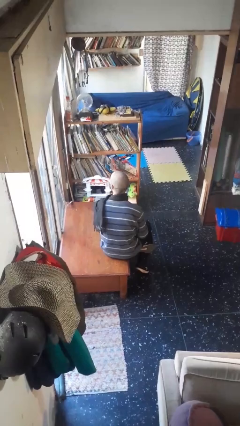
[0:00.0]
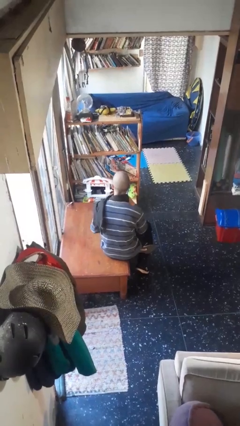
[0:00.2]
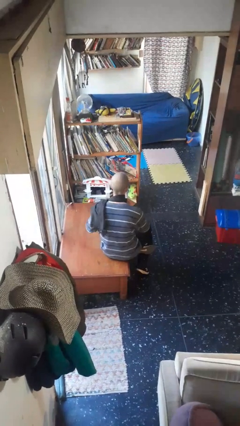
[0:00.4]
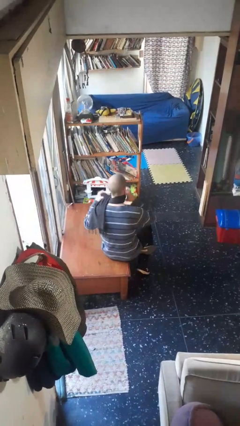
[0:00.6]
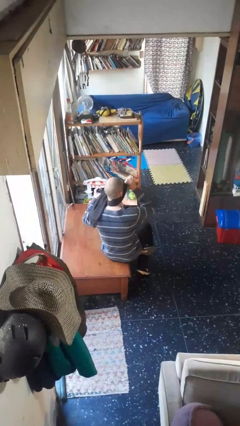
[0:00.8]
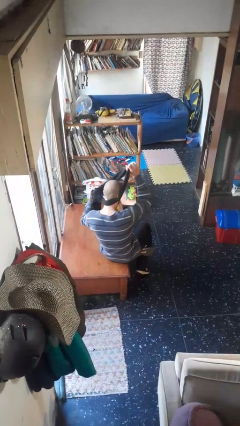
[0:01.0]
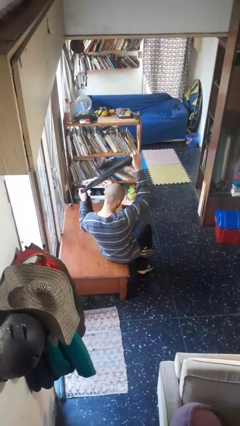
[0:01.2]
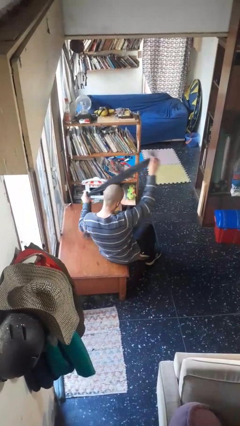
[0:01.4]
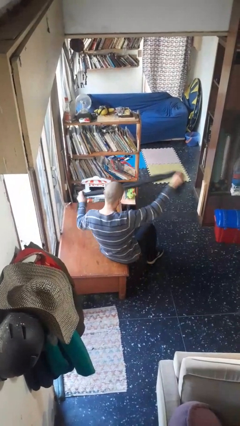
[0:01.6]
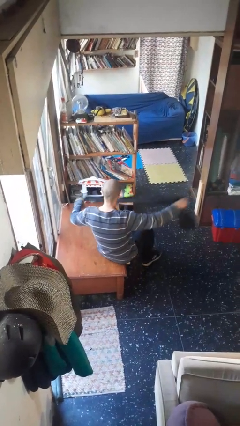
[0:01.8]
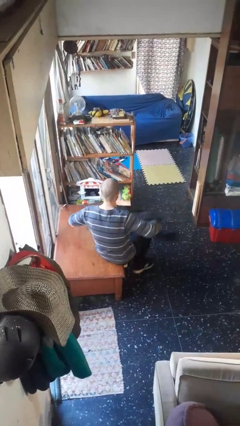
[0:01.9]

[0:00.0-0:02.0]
person takes off scarf

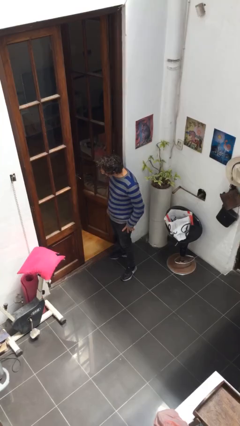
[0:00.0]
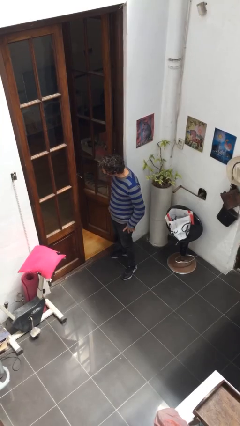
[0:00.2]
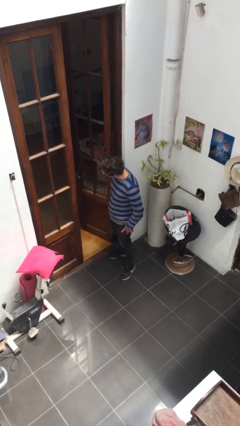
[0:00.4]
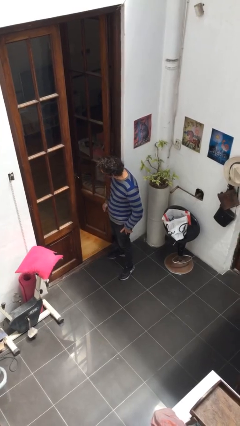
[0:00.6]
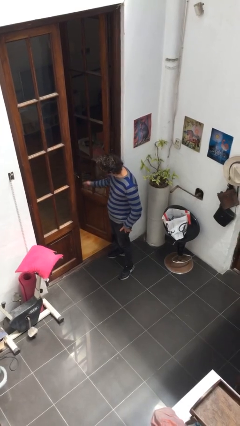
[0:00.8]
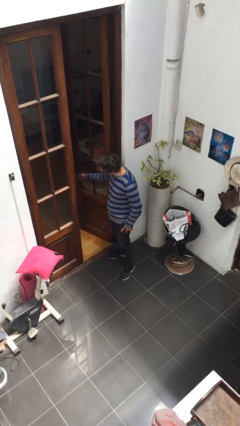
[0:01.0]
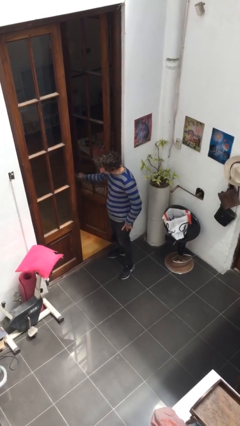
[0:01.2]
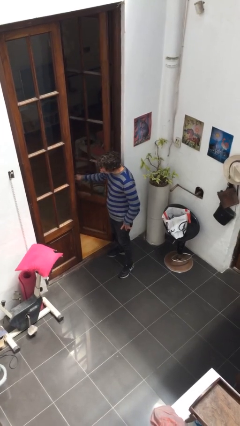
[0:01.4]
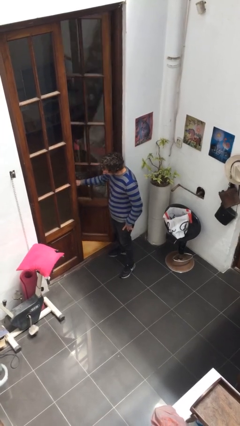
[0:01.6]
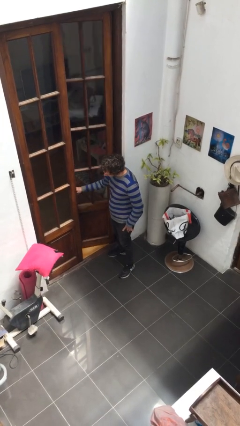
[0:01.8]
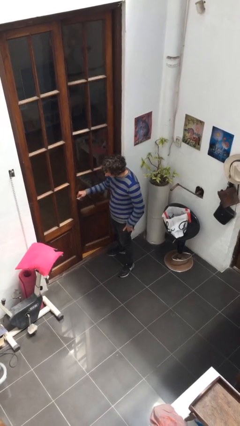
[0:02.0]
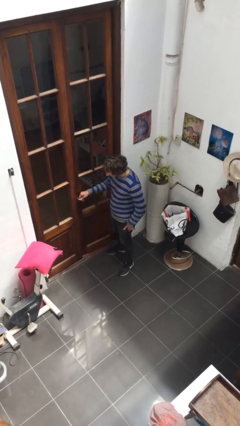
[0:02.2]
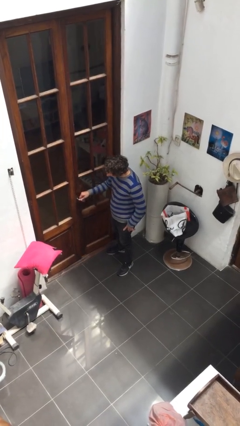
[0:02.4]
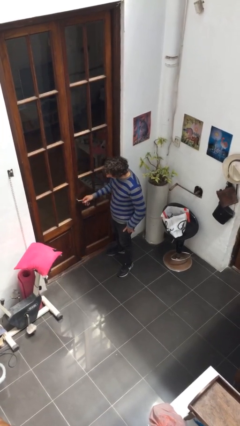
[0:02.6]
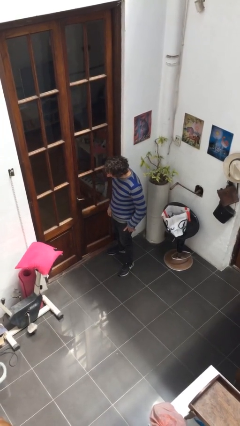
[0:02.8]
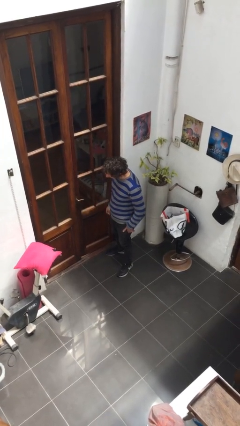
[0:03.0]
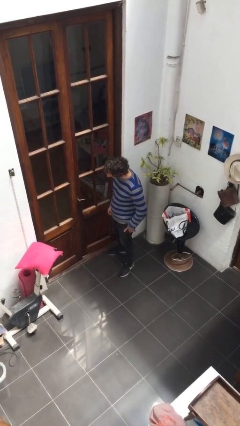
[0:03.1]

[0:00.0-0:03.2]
person closes facility door

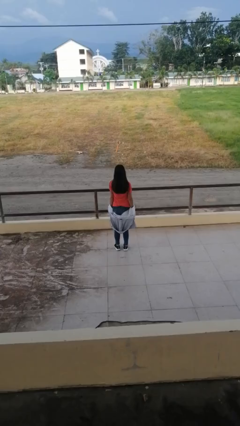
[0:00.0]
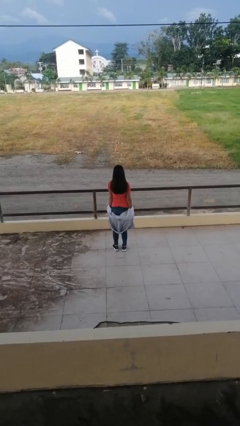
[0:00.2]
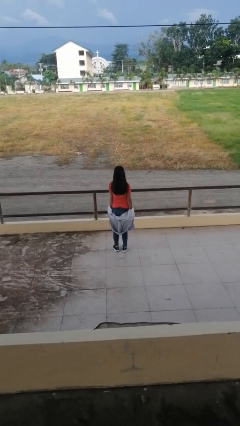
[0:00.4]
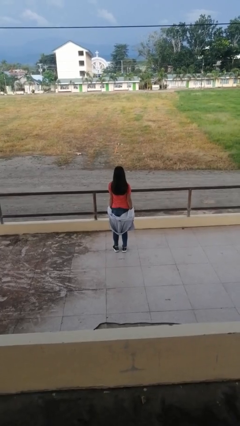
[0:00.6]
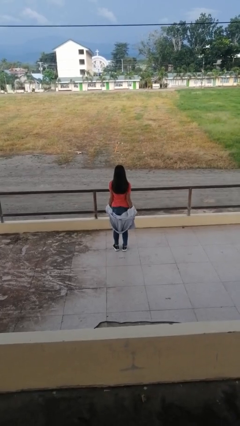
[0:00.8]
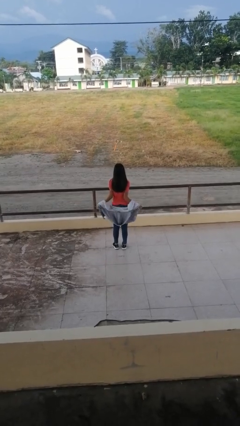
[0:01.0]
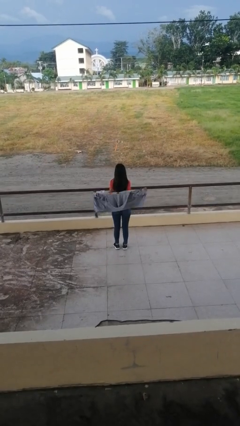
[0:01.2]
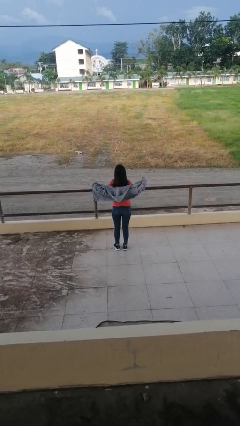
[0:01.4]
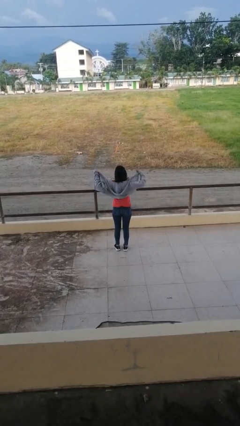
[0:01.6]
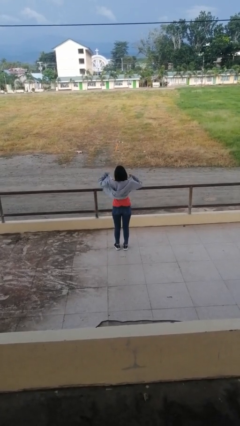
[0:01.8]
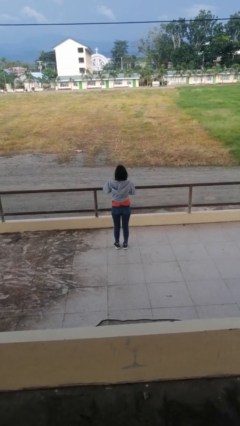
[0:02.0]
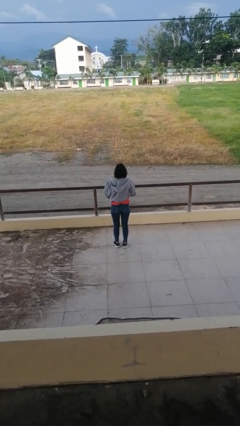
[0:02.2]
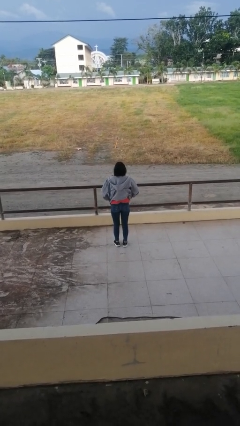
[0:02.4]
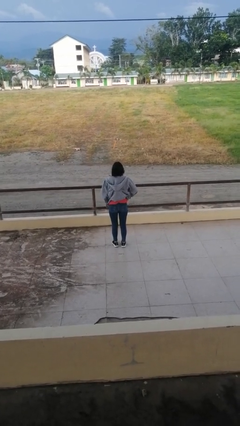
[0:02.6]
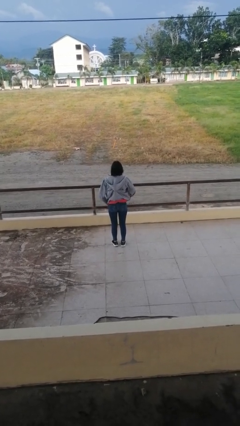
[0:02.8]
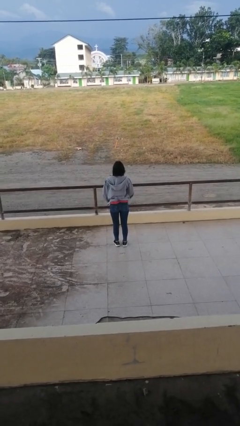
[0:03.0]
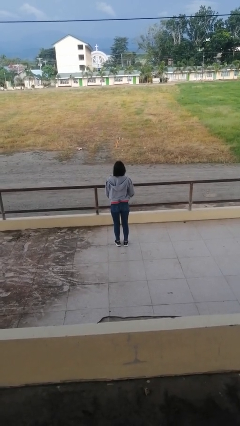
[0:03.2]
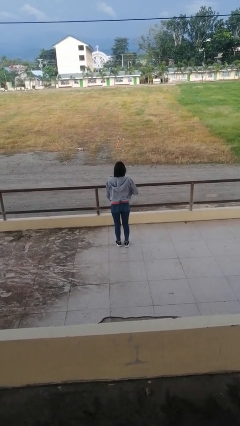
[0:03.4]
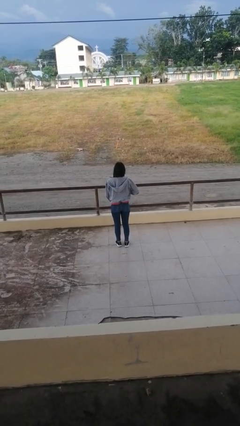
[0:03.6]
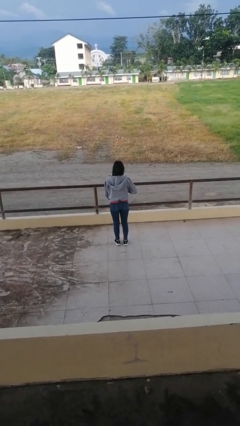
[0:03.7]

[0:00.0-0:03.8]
person puts on jacket

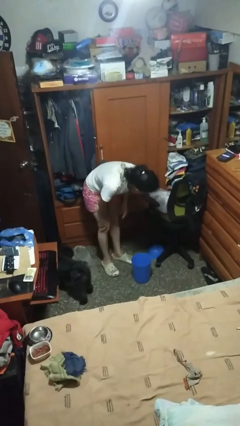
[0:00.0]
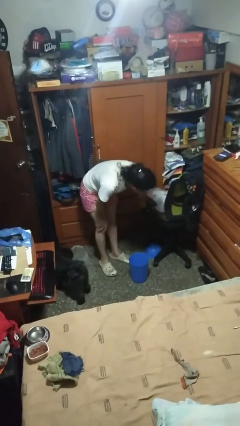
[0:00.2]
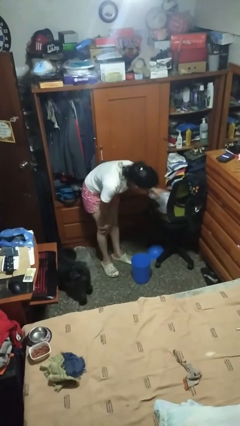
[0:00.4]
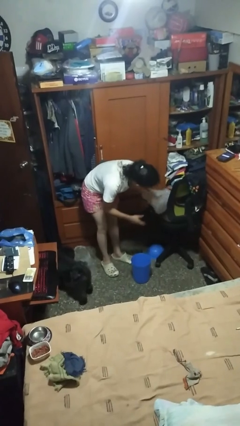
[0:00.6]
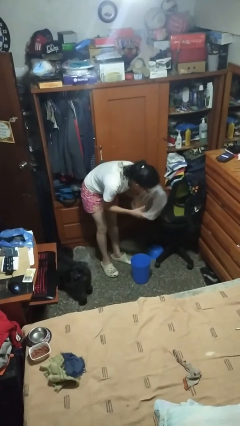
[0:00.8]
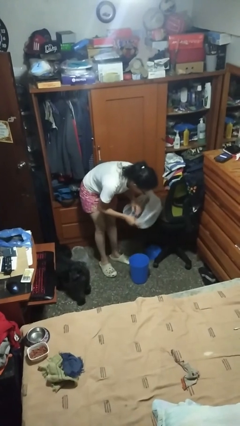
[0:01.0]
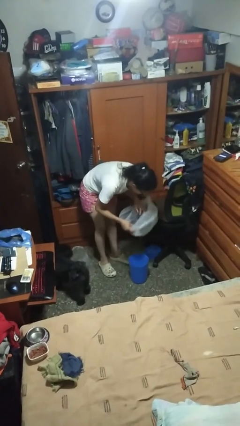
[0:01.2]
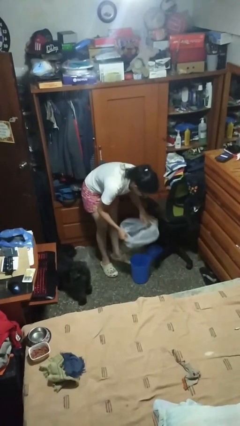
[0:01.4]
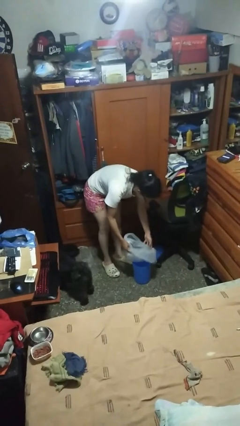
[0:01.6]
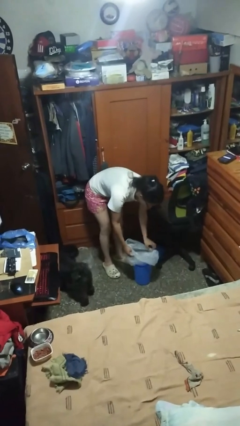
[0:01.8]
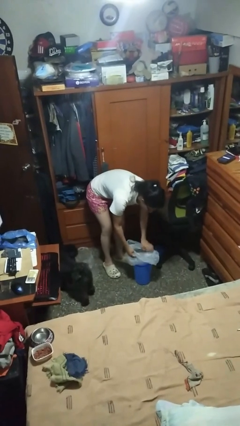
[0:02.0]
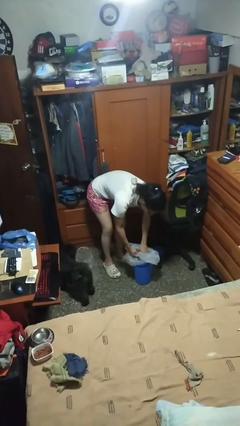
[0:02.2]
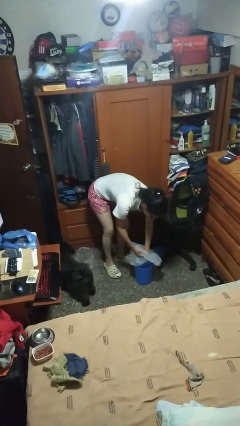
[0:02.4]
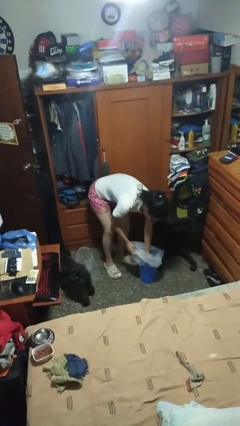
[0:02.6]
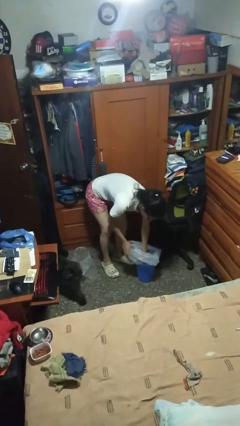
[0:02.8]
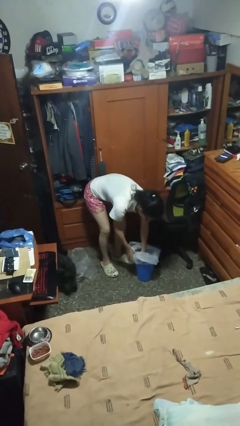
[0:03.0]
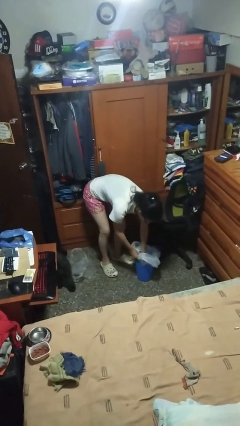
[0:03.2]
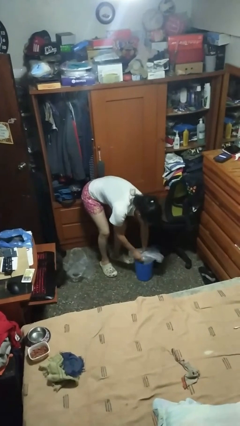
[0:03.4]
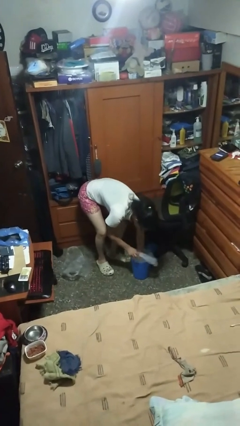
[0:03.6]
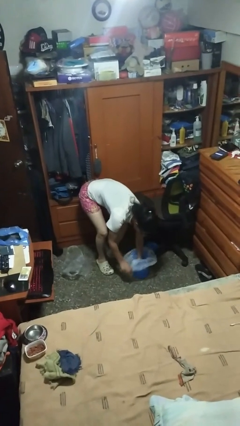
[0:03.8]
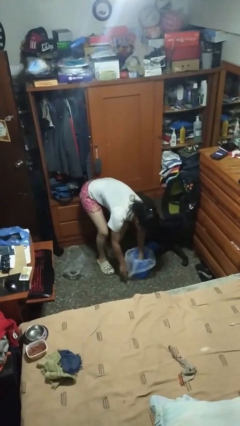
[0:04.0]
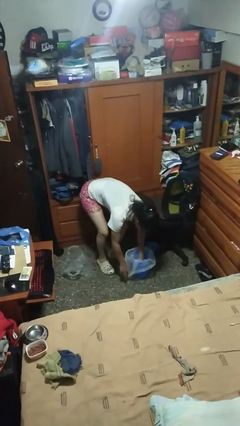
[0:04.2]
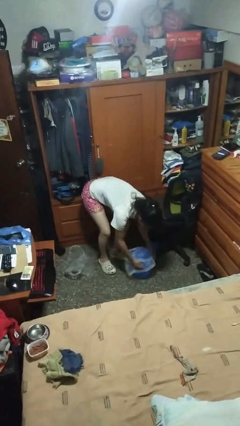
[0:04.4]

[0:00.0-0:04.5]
person inserts trashbag into trashcan

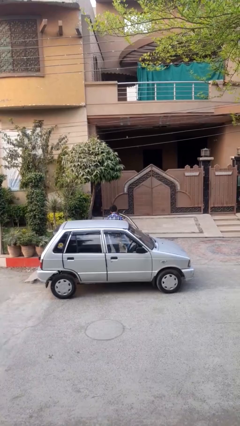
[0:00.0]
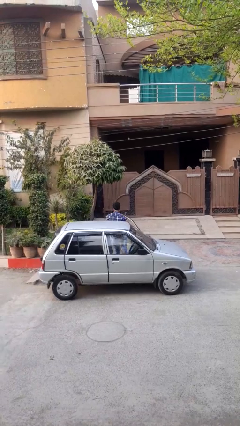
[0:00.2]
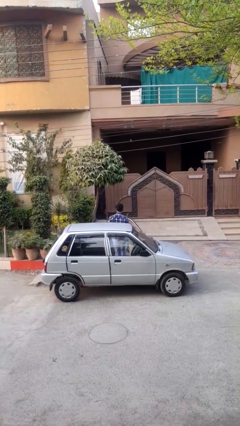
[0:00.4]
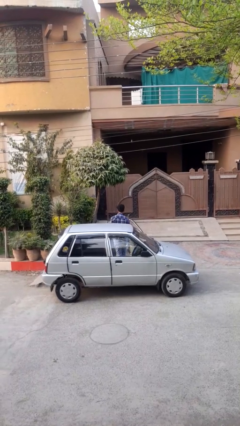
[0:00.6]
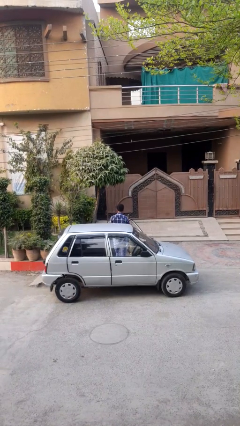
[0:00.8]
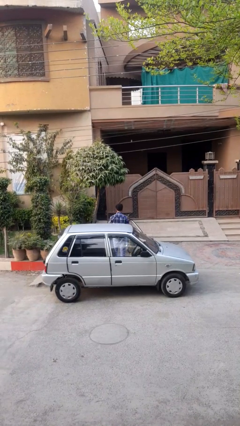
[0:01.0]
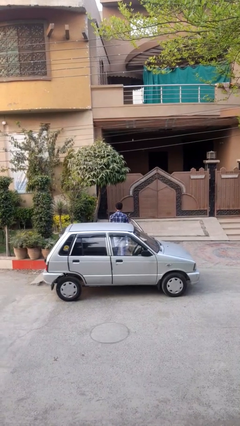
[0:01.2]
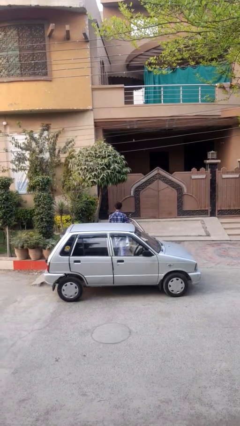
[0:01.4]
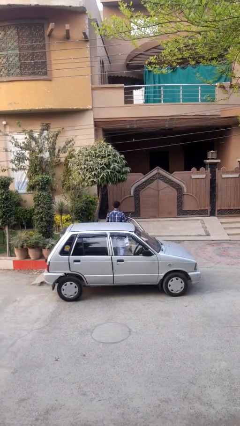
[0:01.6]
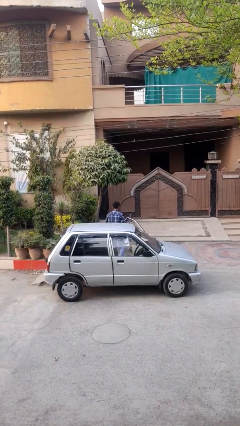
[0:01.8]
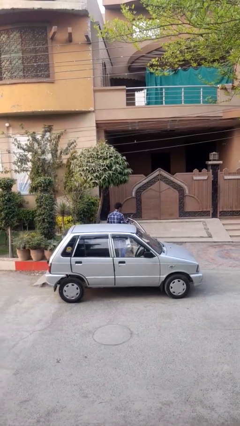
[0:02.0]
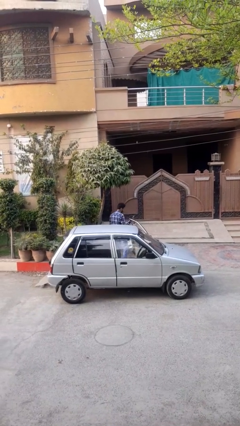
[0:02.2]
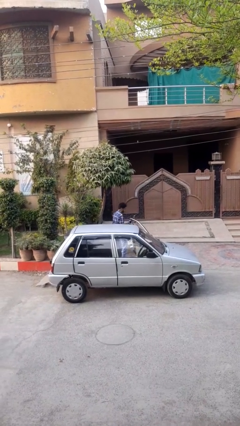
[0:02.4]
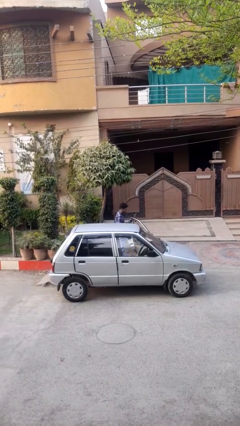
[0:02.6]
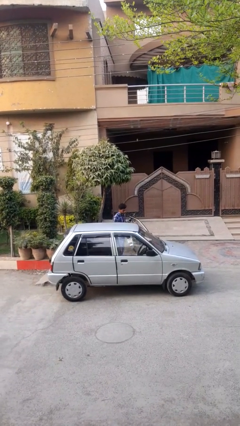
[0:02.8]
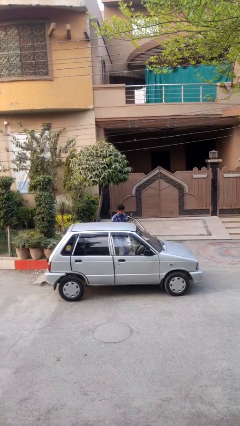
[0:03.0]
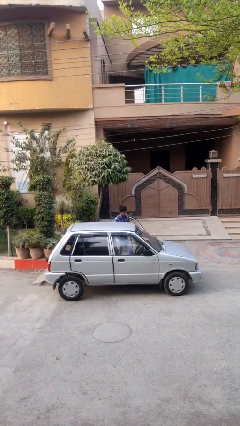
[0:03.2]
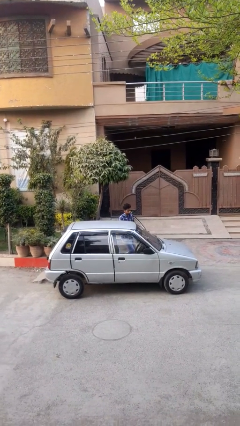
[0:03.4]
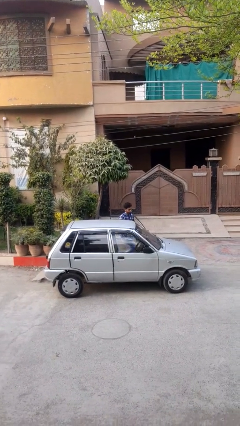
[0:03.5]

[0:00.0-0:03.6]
person exits car

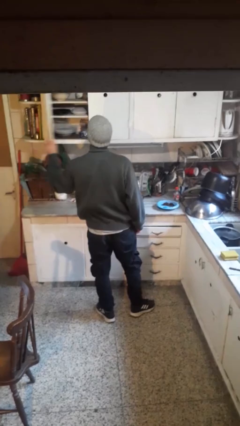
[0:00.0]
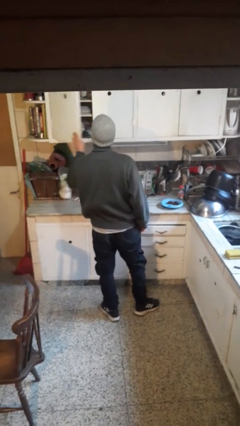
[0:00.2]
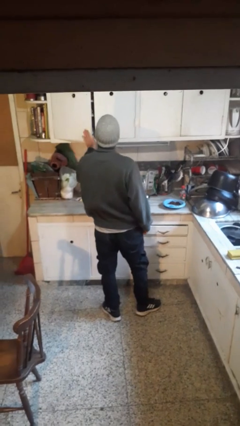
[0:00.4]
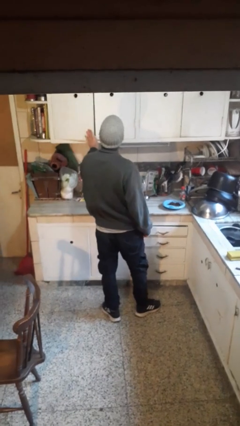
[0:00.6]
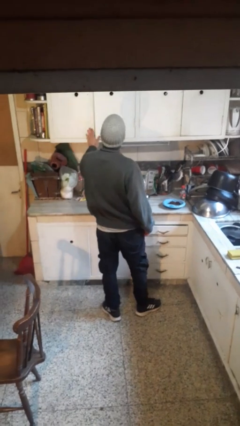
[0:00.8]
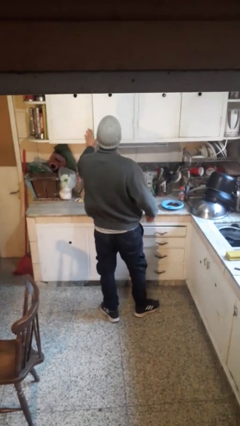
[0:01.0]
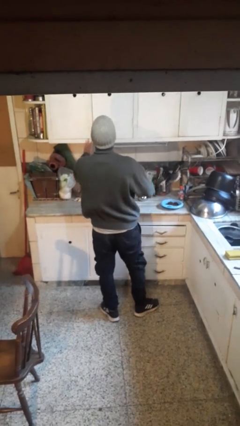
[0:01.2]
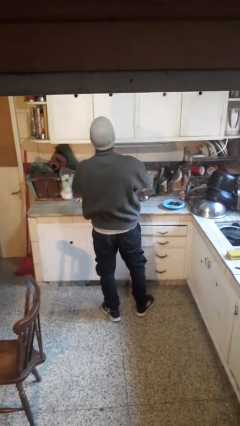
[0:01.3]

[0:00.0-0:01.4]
person closes cabinet
